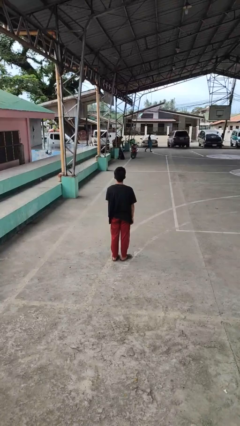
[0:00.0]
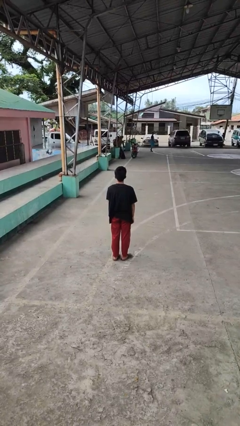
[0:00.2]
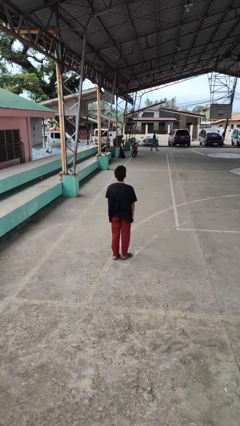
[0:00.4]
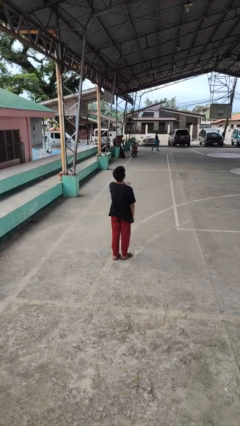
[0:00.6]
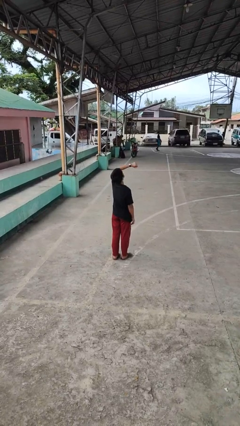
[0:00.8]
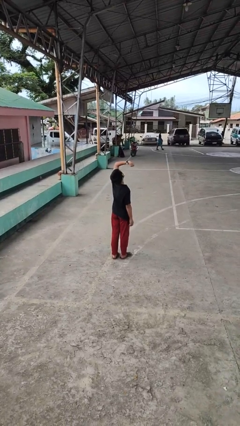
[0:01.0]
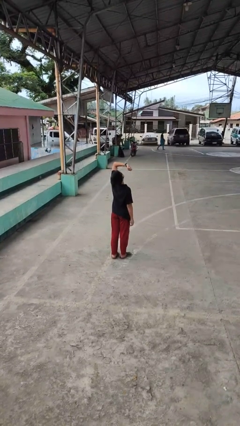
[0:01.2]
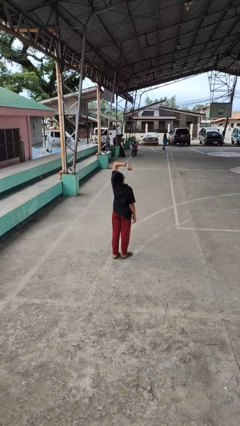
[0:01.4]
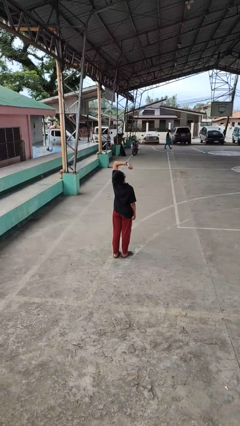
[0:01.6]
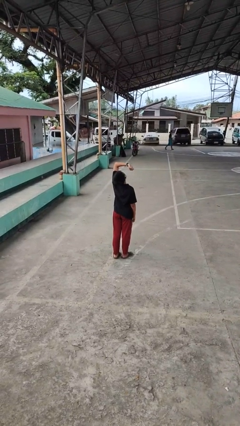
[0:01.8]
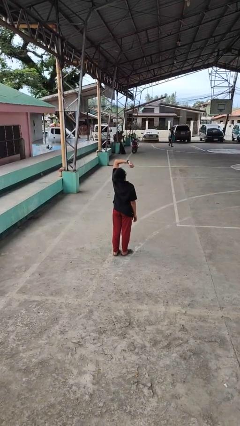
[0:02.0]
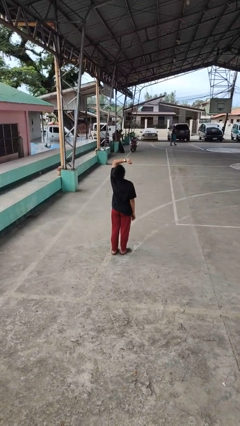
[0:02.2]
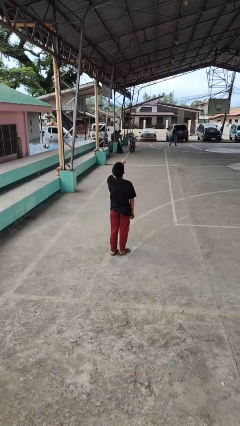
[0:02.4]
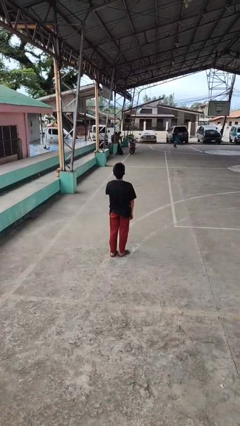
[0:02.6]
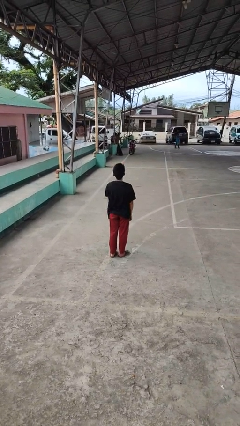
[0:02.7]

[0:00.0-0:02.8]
person looks at wristwatch

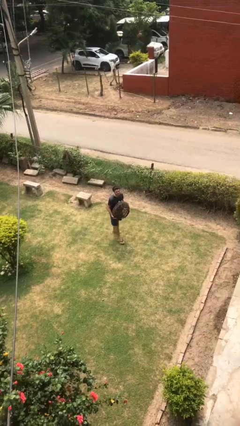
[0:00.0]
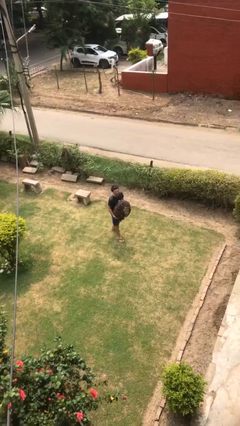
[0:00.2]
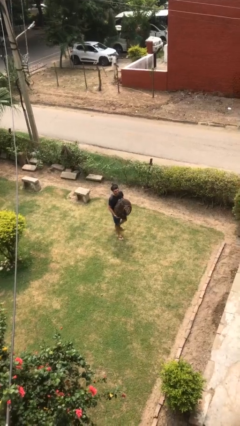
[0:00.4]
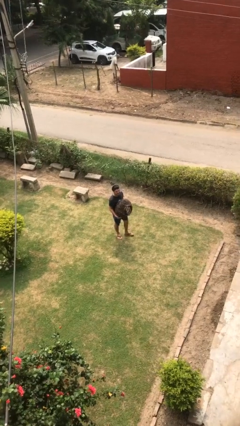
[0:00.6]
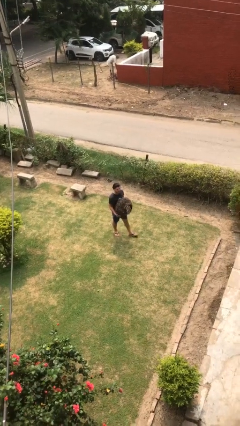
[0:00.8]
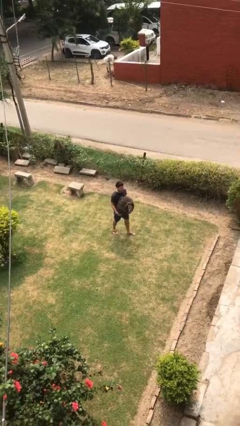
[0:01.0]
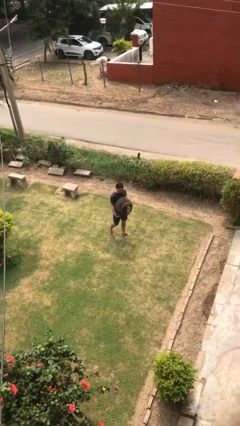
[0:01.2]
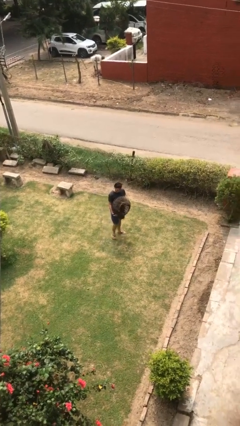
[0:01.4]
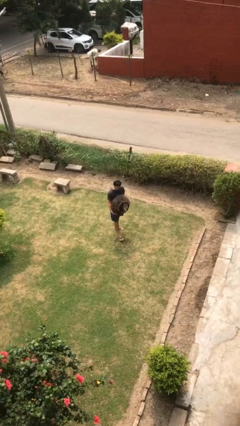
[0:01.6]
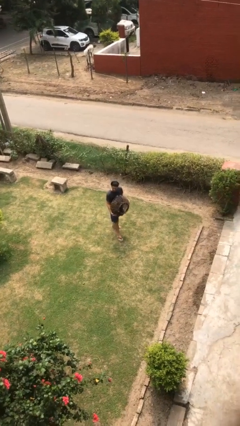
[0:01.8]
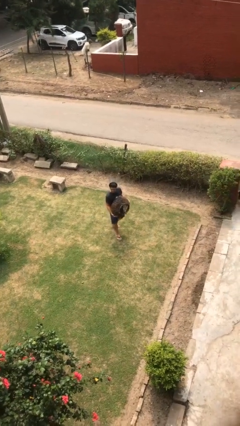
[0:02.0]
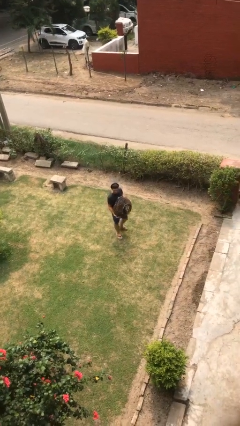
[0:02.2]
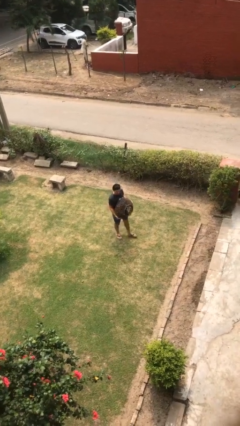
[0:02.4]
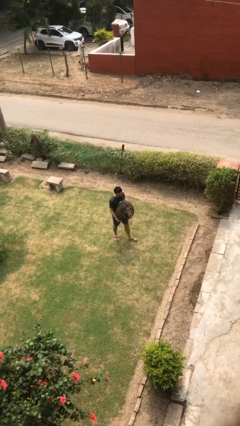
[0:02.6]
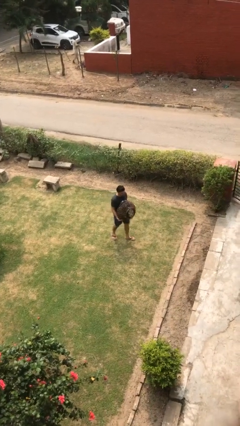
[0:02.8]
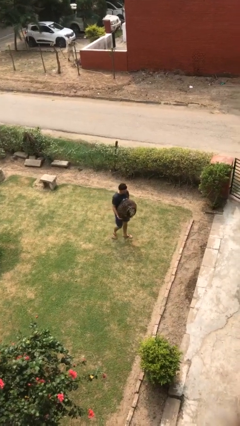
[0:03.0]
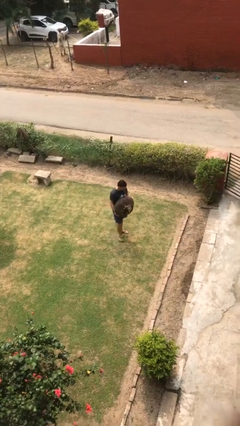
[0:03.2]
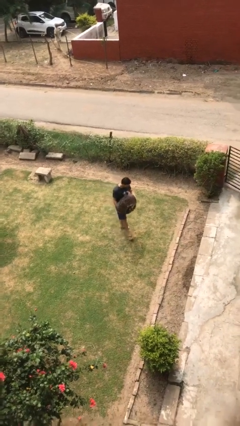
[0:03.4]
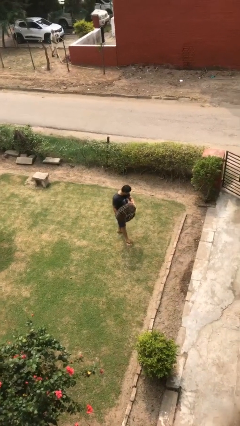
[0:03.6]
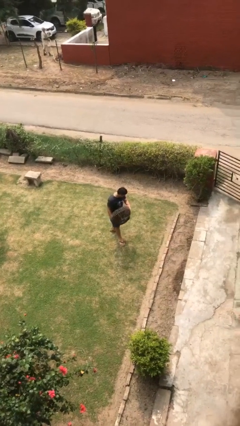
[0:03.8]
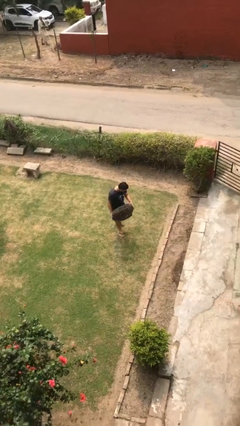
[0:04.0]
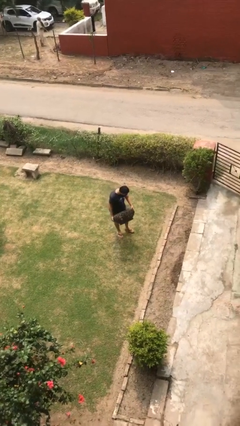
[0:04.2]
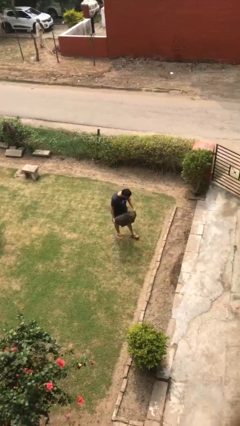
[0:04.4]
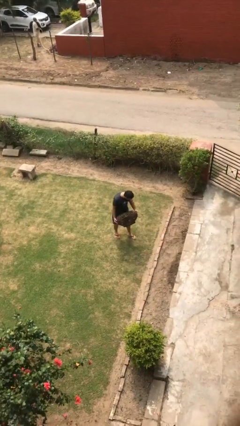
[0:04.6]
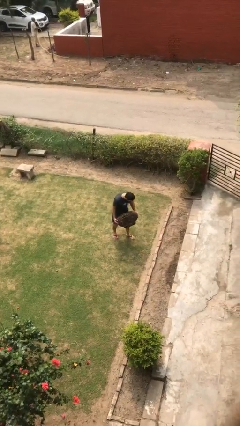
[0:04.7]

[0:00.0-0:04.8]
person carries heavy object

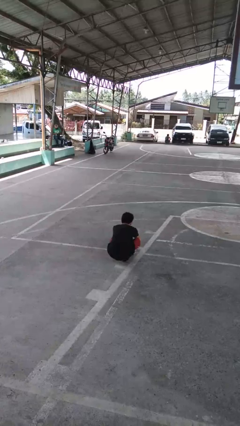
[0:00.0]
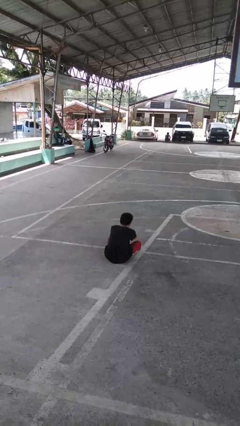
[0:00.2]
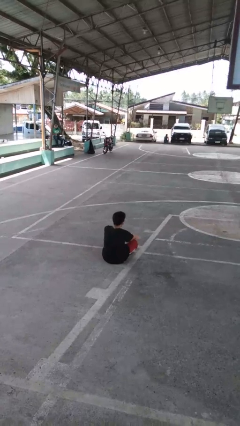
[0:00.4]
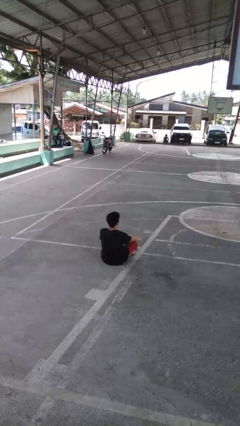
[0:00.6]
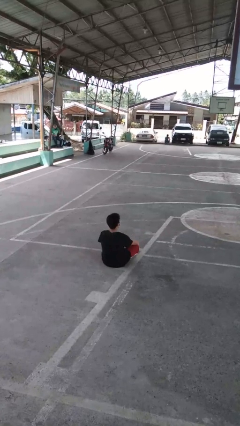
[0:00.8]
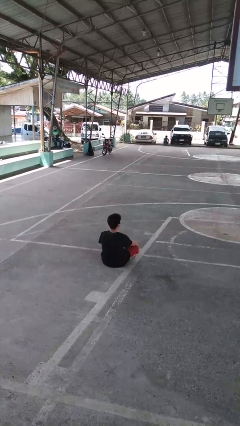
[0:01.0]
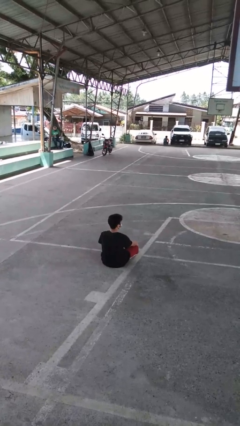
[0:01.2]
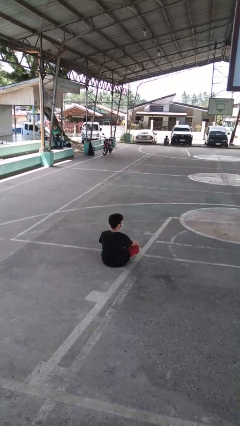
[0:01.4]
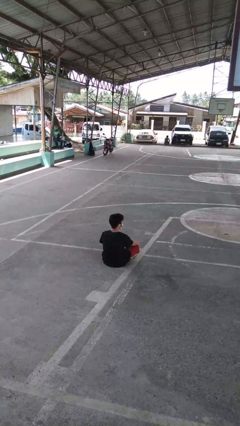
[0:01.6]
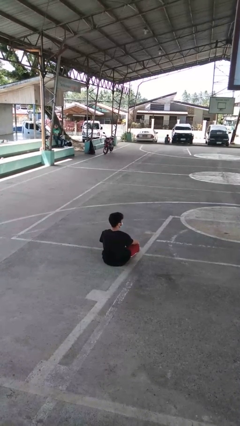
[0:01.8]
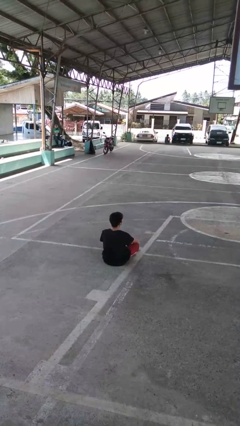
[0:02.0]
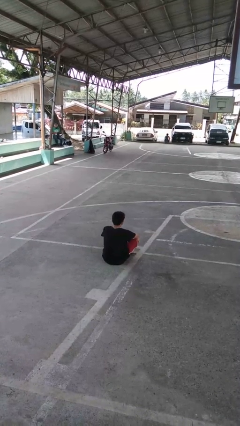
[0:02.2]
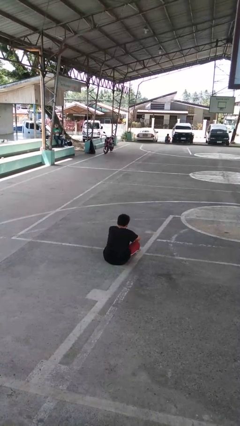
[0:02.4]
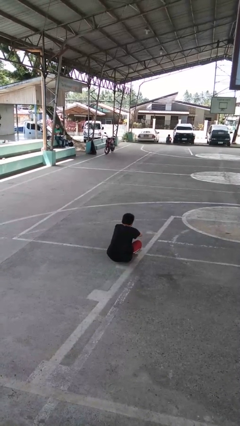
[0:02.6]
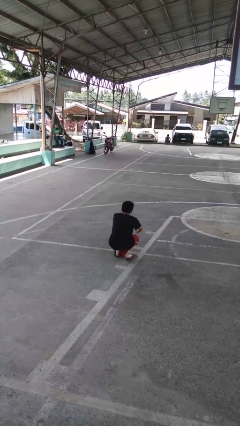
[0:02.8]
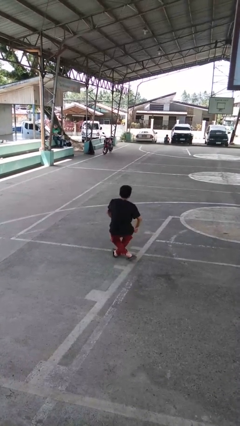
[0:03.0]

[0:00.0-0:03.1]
person sits crisscross

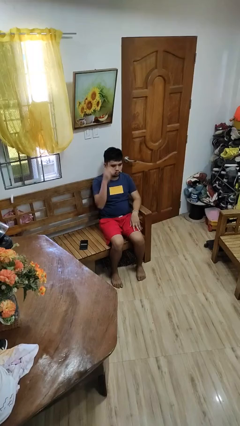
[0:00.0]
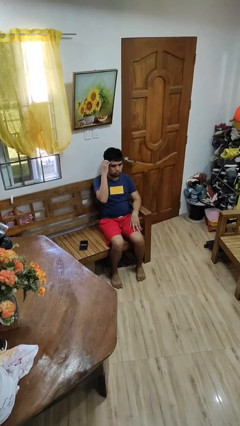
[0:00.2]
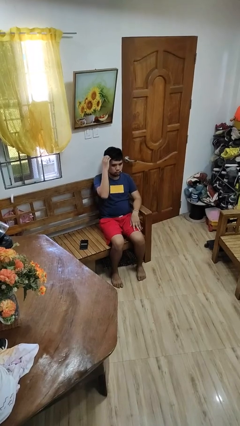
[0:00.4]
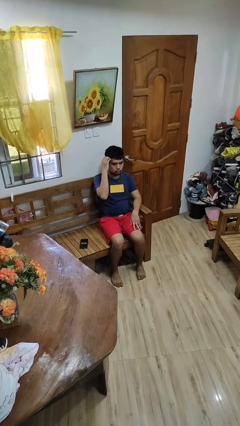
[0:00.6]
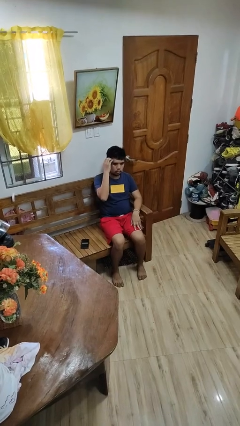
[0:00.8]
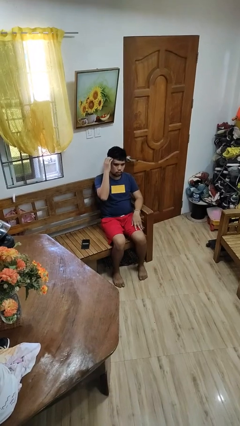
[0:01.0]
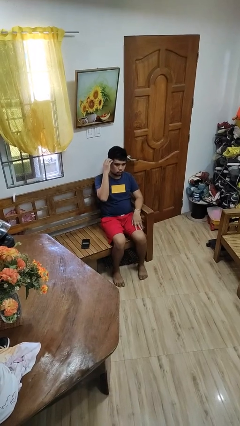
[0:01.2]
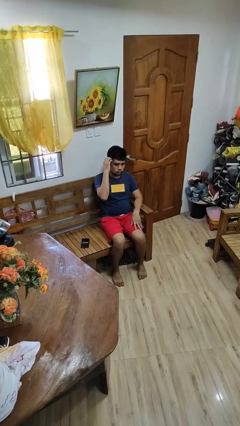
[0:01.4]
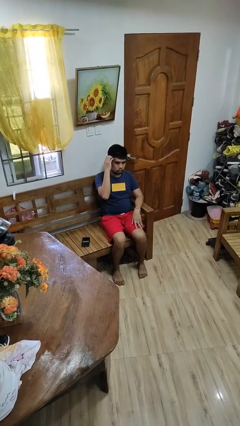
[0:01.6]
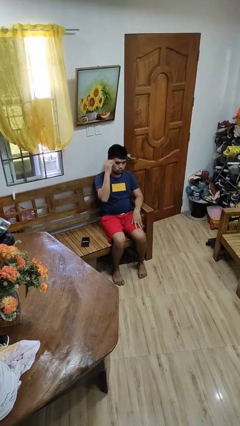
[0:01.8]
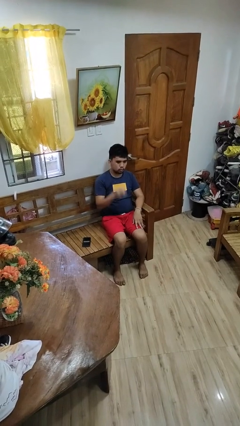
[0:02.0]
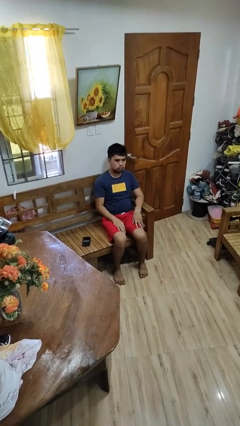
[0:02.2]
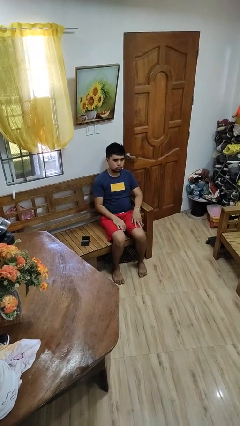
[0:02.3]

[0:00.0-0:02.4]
person scratches face

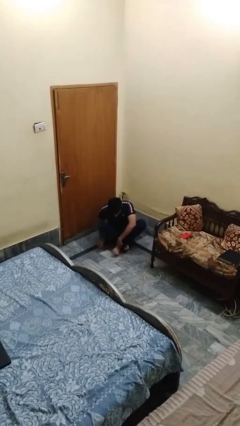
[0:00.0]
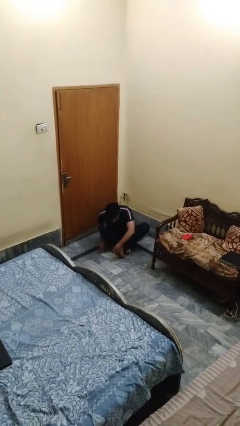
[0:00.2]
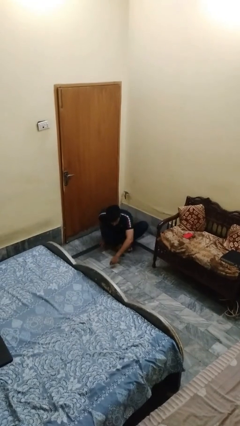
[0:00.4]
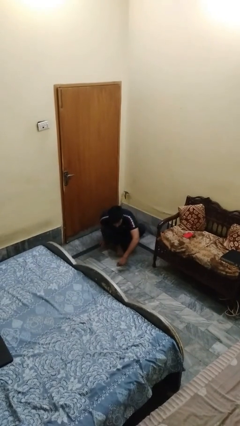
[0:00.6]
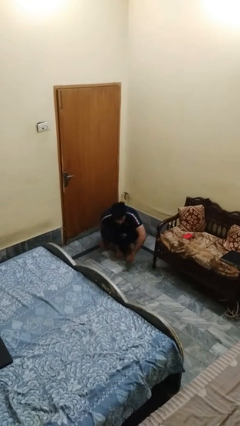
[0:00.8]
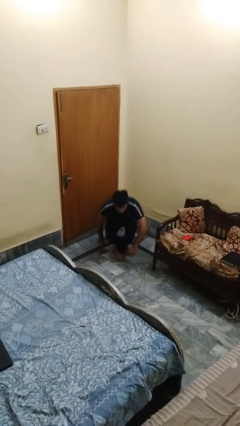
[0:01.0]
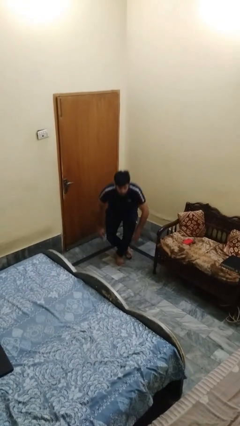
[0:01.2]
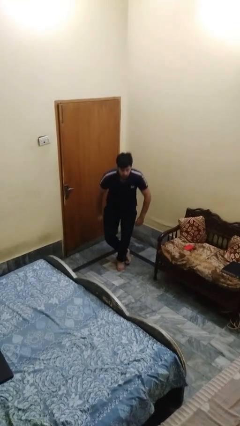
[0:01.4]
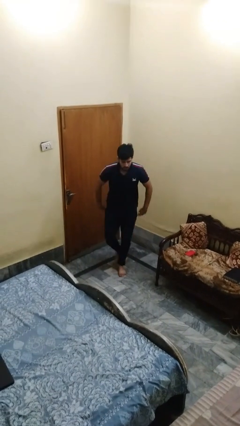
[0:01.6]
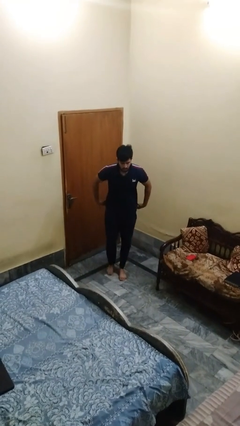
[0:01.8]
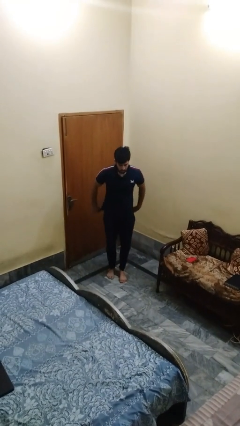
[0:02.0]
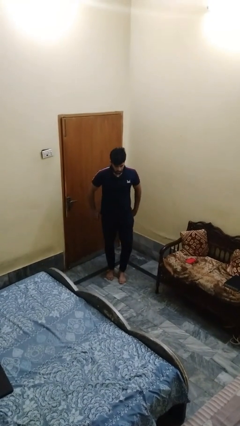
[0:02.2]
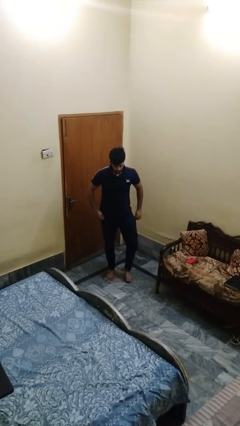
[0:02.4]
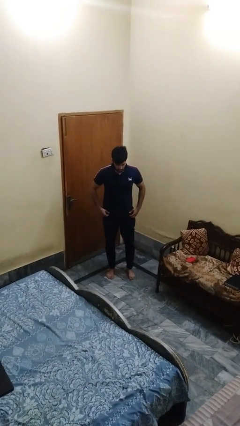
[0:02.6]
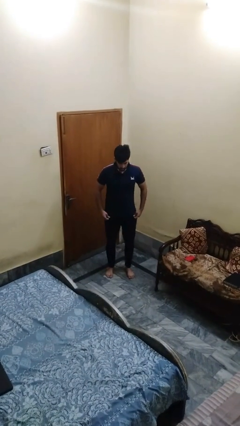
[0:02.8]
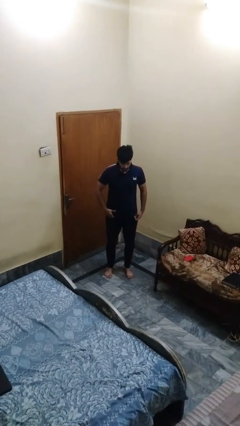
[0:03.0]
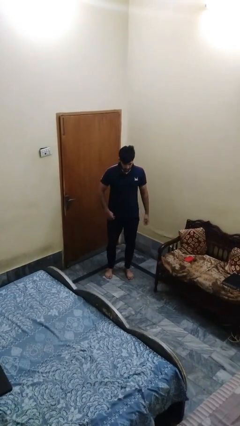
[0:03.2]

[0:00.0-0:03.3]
person stands up from floor

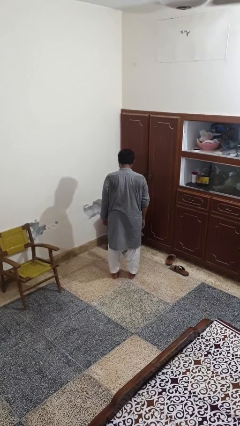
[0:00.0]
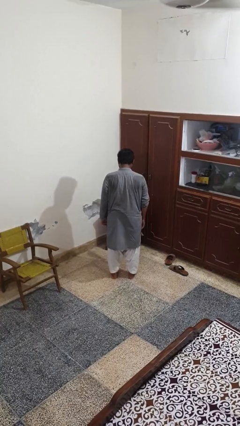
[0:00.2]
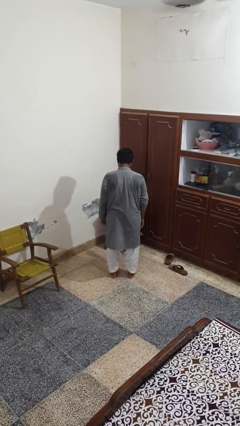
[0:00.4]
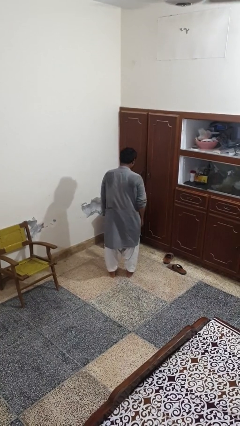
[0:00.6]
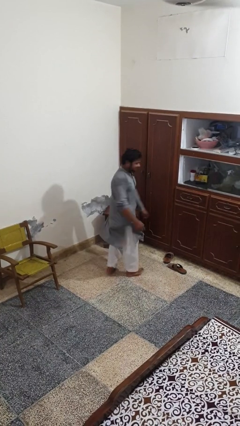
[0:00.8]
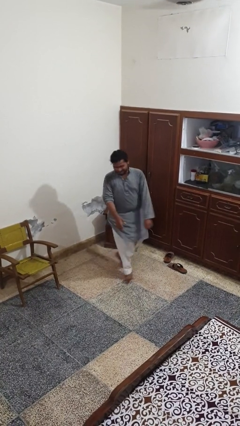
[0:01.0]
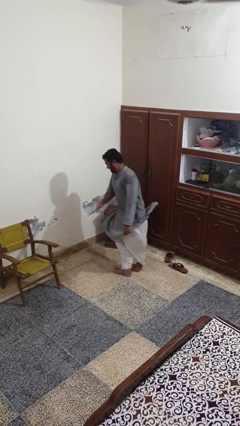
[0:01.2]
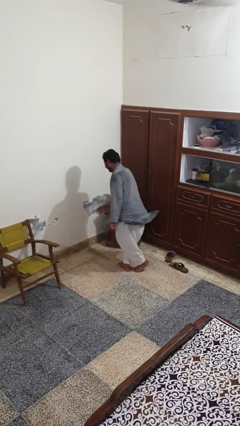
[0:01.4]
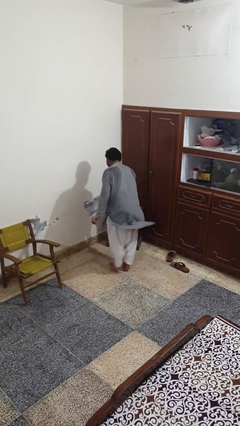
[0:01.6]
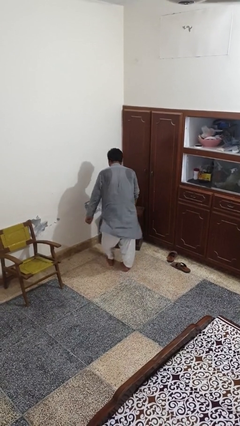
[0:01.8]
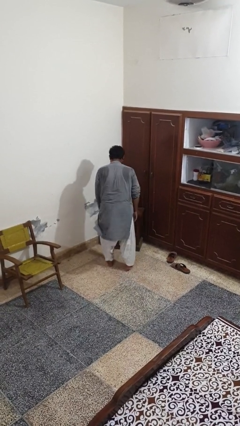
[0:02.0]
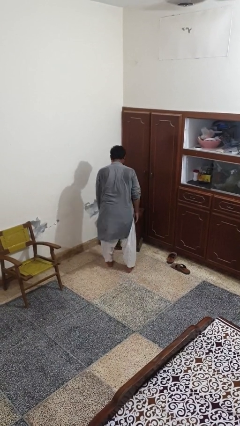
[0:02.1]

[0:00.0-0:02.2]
person twirls
